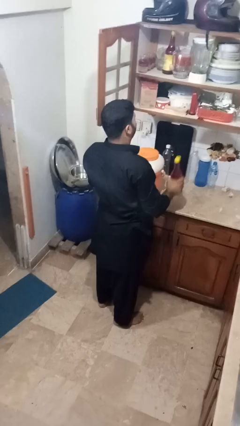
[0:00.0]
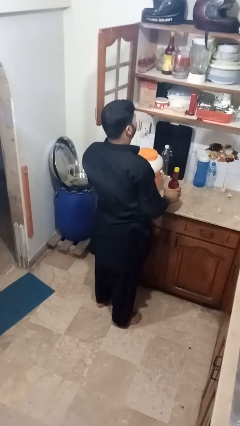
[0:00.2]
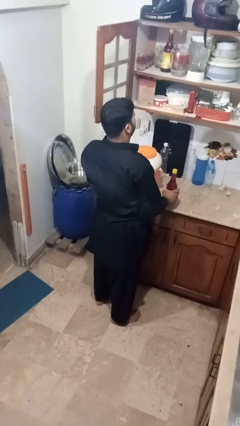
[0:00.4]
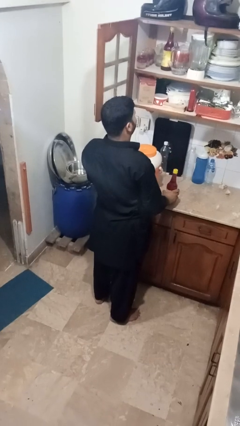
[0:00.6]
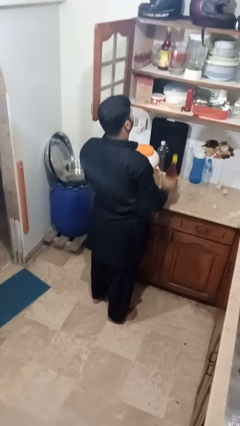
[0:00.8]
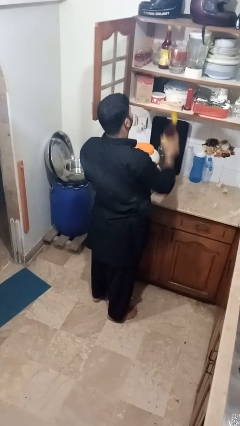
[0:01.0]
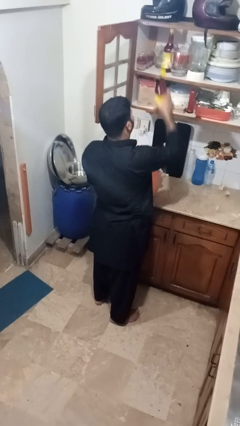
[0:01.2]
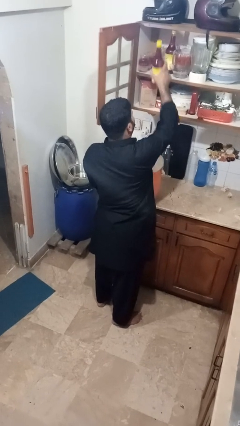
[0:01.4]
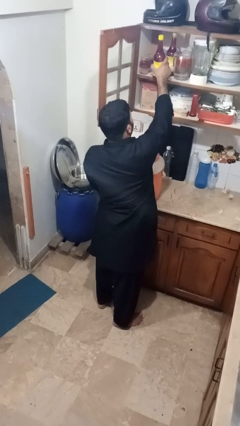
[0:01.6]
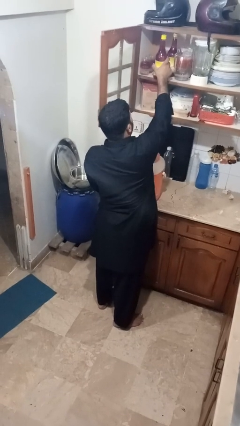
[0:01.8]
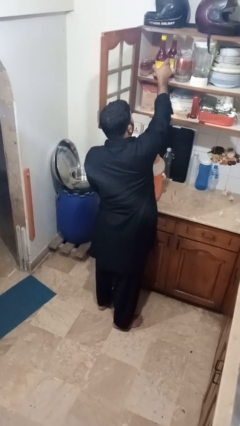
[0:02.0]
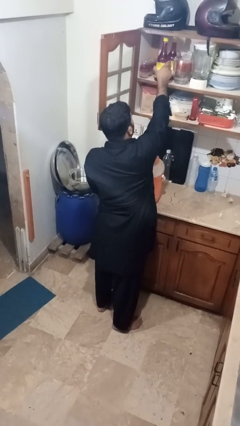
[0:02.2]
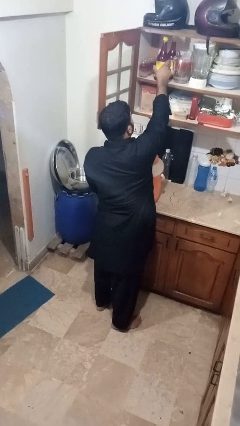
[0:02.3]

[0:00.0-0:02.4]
person puts down object into cabinet

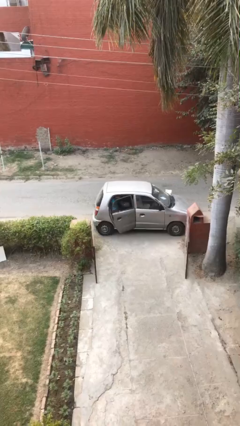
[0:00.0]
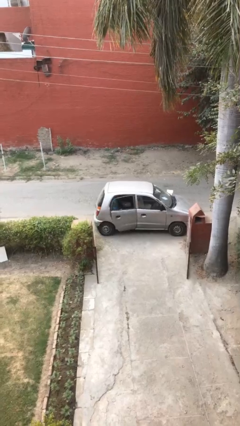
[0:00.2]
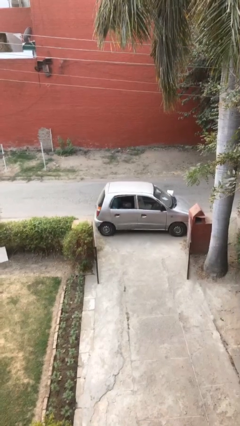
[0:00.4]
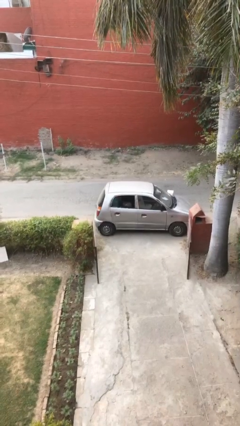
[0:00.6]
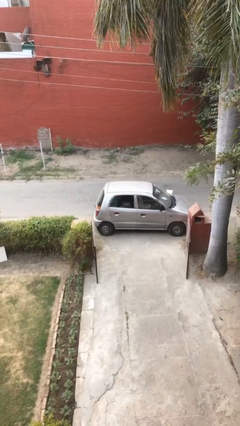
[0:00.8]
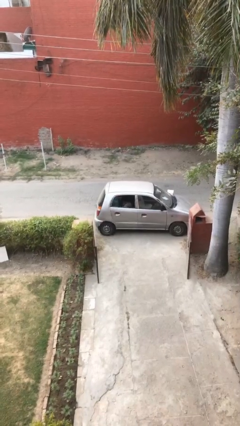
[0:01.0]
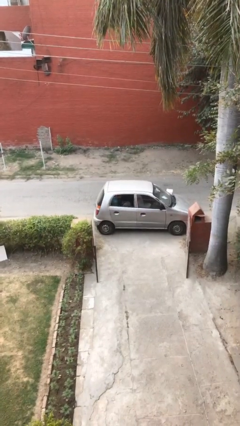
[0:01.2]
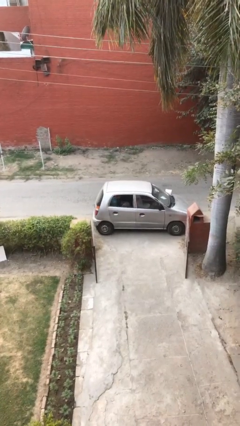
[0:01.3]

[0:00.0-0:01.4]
person closes car door

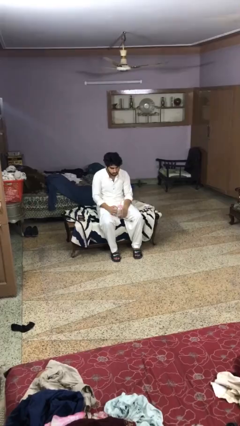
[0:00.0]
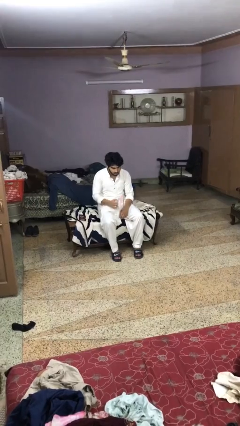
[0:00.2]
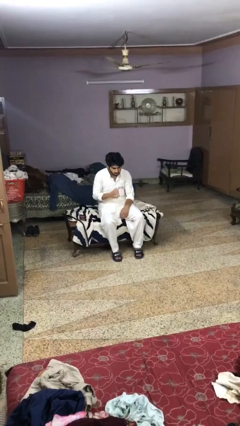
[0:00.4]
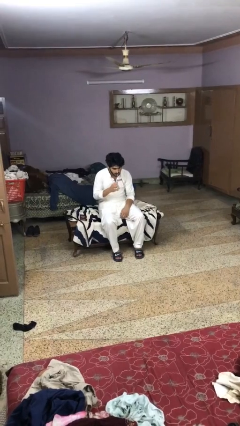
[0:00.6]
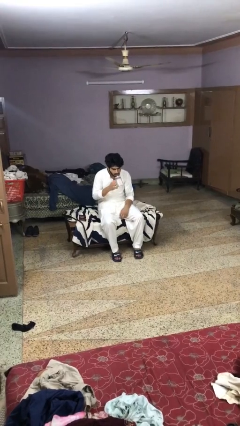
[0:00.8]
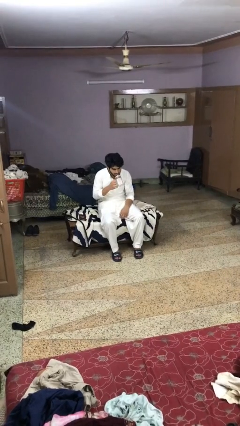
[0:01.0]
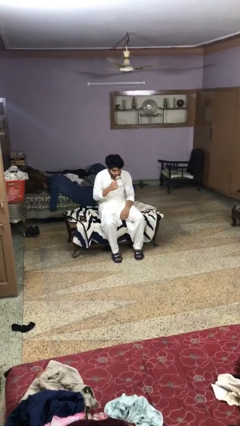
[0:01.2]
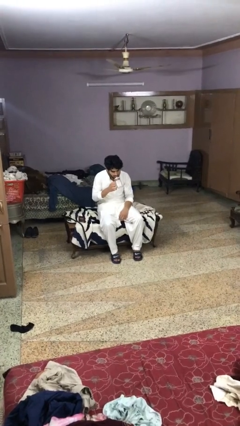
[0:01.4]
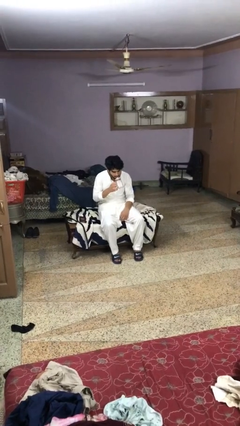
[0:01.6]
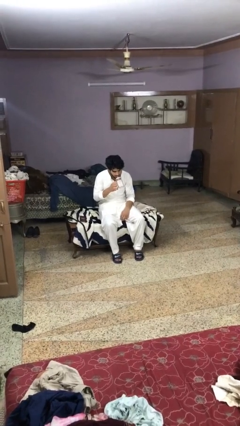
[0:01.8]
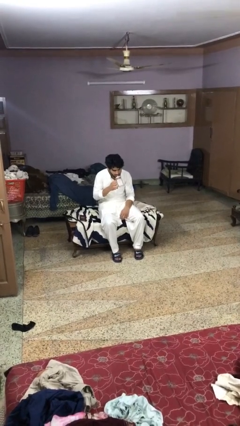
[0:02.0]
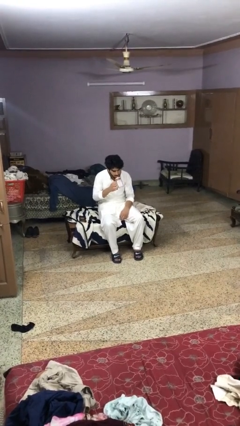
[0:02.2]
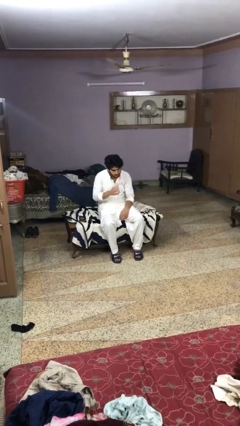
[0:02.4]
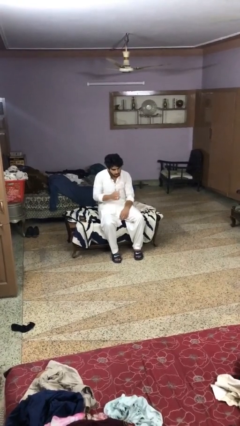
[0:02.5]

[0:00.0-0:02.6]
person drinks from straw

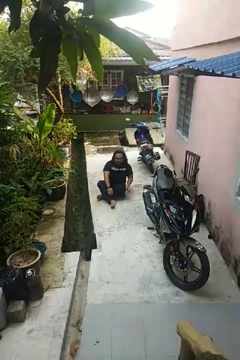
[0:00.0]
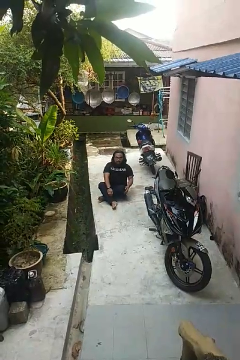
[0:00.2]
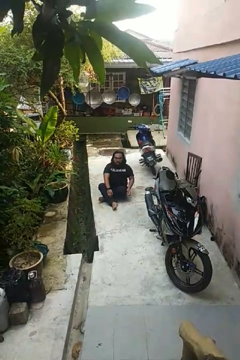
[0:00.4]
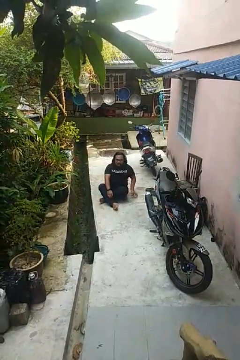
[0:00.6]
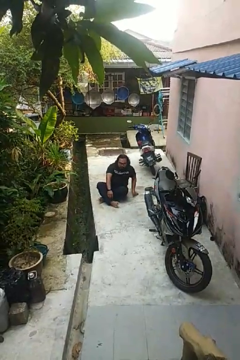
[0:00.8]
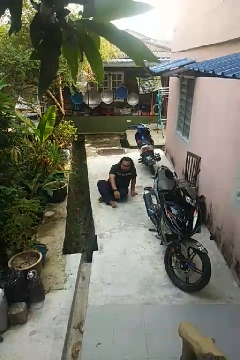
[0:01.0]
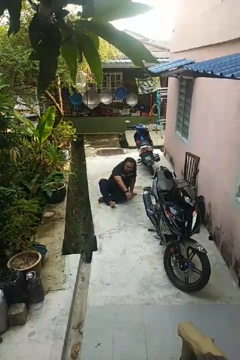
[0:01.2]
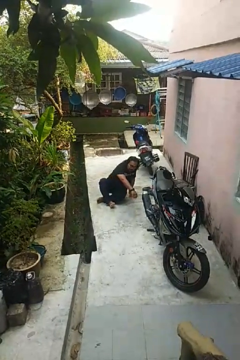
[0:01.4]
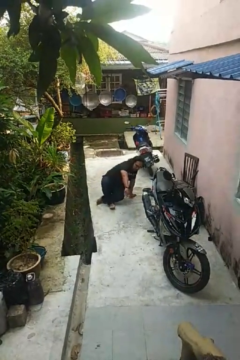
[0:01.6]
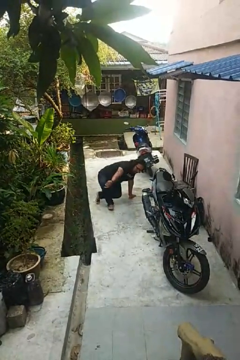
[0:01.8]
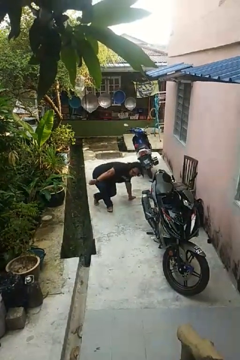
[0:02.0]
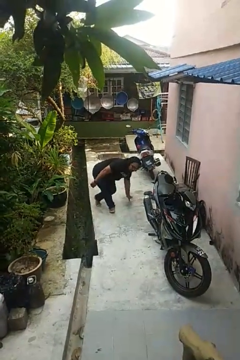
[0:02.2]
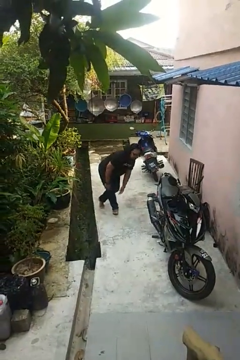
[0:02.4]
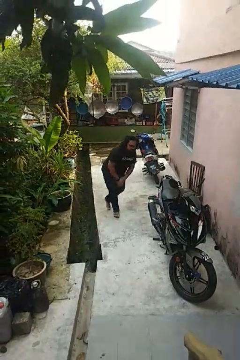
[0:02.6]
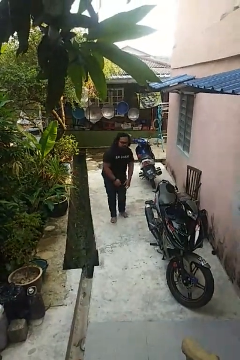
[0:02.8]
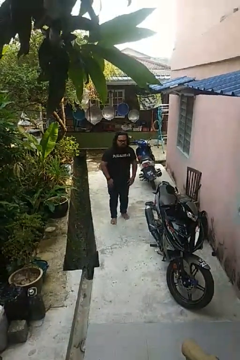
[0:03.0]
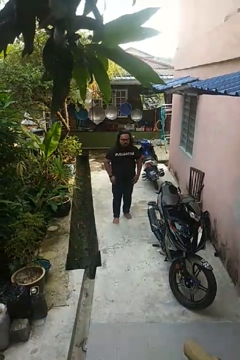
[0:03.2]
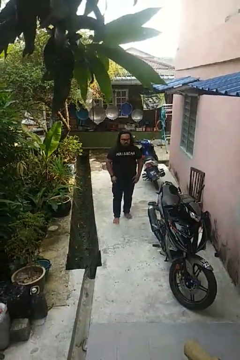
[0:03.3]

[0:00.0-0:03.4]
person stands up from floor

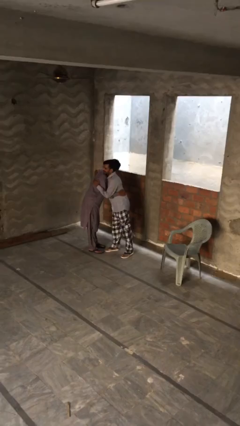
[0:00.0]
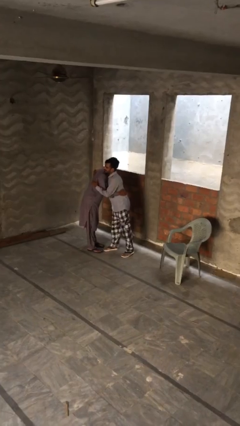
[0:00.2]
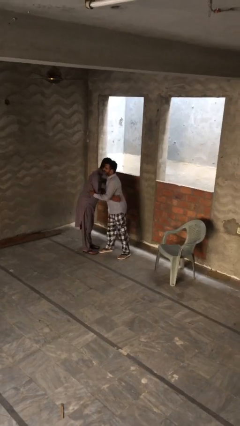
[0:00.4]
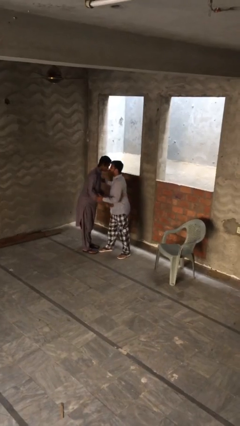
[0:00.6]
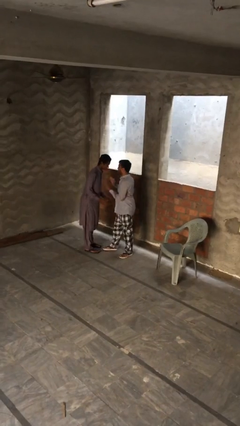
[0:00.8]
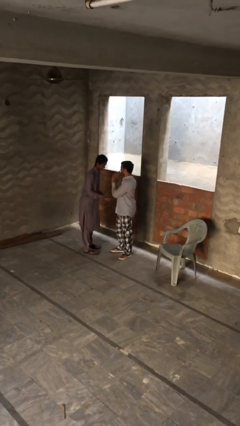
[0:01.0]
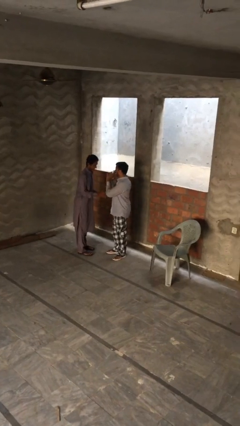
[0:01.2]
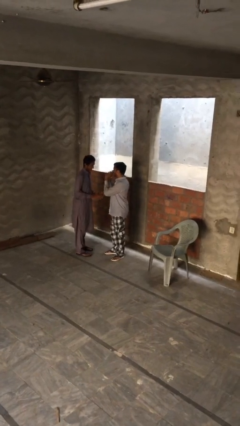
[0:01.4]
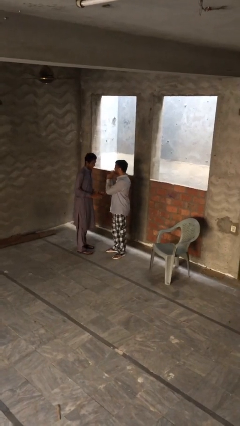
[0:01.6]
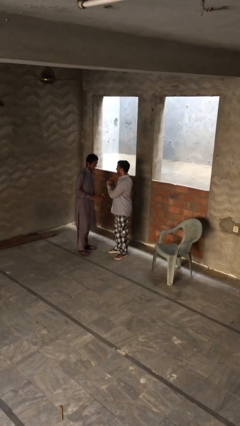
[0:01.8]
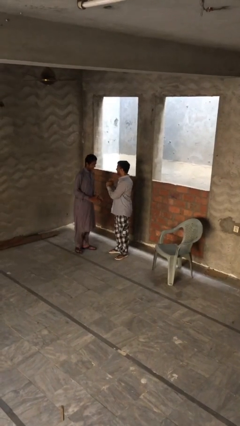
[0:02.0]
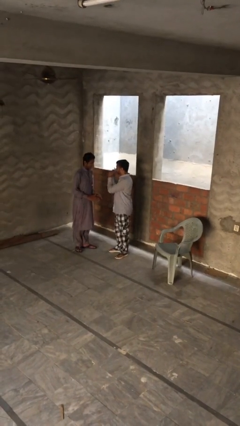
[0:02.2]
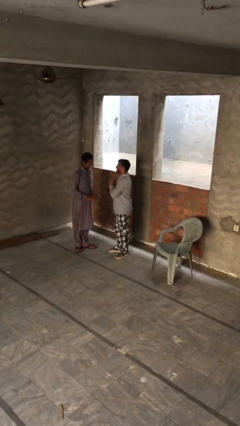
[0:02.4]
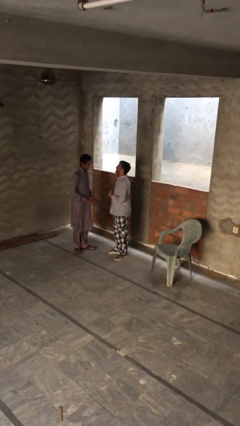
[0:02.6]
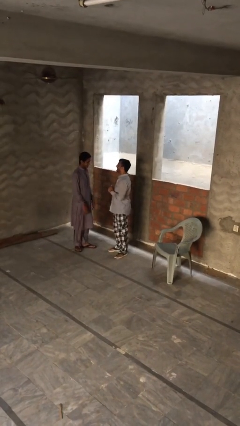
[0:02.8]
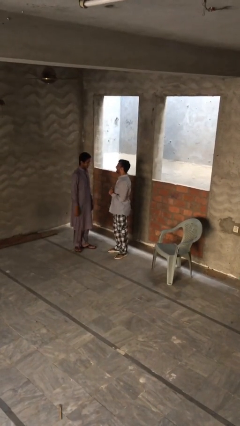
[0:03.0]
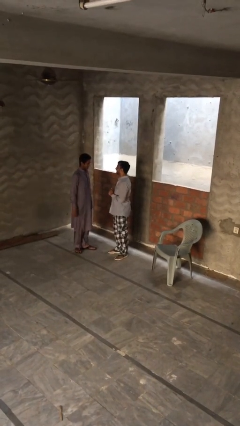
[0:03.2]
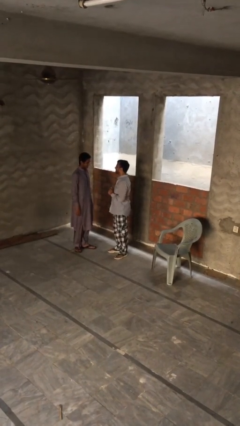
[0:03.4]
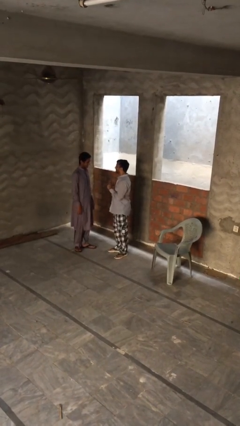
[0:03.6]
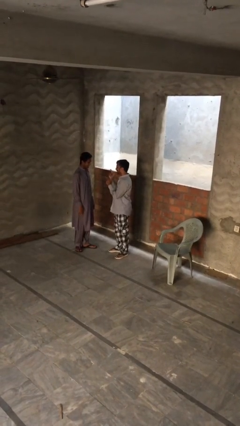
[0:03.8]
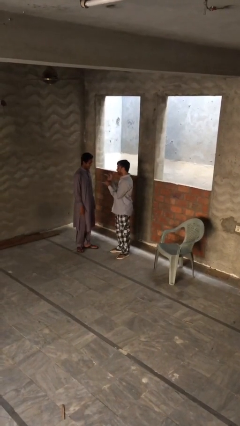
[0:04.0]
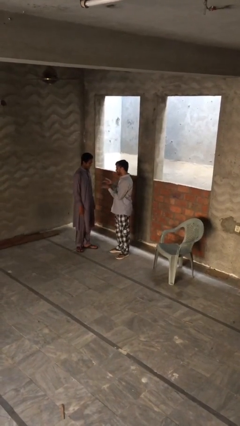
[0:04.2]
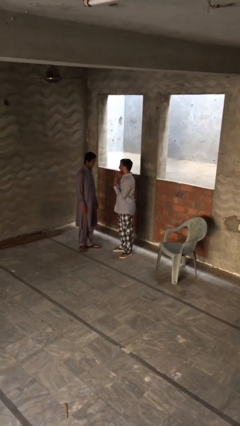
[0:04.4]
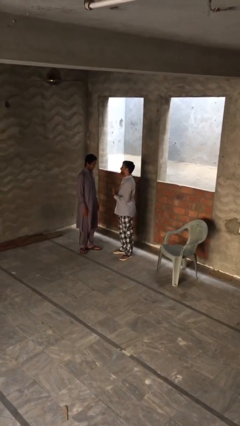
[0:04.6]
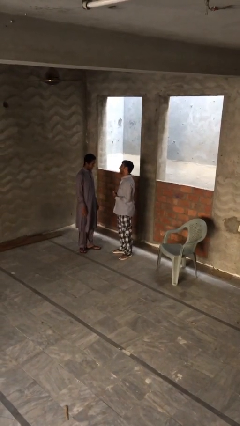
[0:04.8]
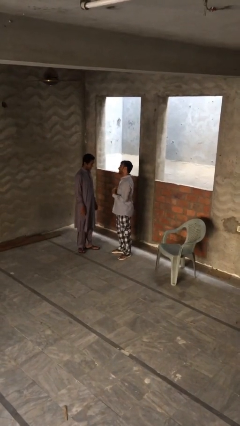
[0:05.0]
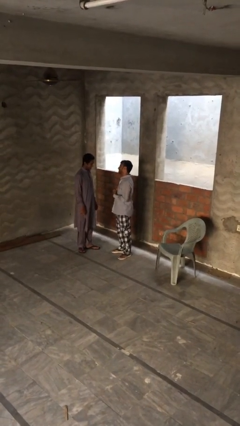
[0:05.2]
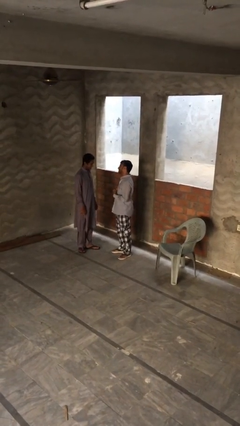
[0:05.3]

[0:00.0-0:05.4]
person talks to person

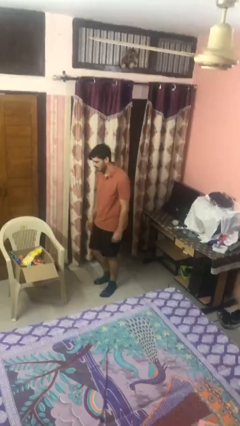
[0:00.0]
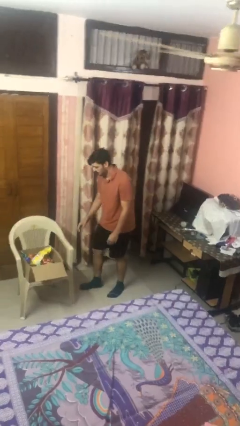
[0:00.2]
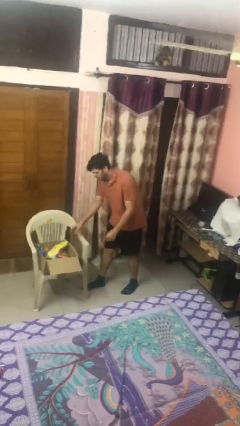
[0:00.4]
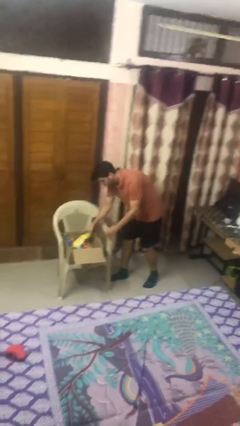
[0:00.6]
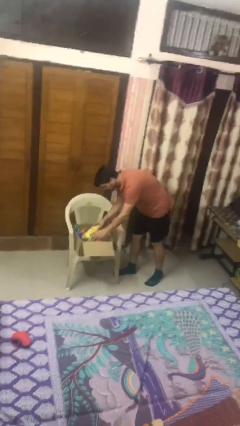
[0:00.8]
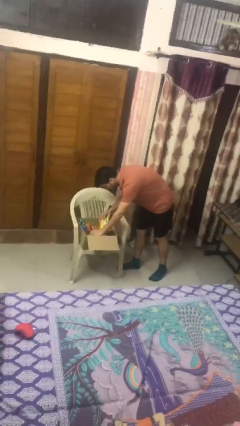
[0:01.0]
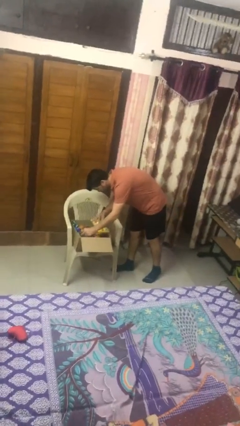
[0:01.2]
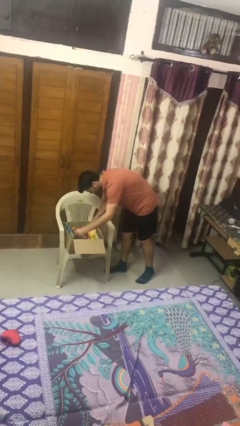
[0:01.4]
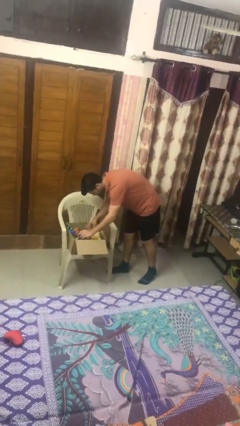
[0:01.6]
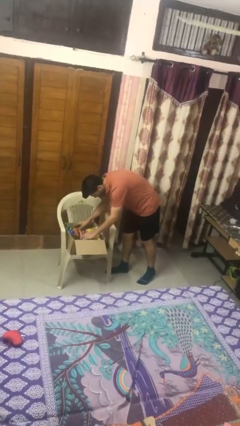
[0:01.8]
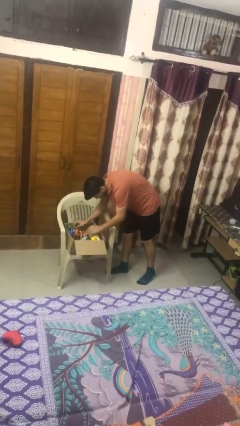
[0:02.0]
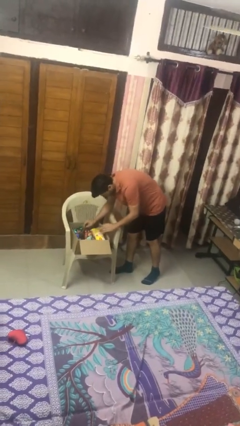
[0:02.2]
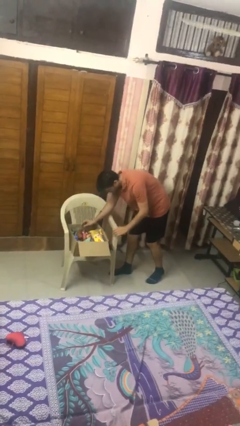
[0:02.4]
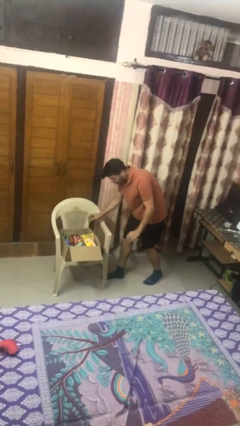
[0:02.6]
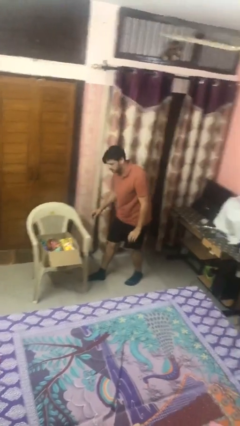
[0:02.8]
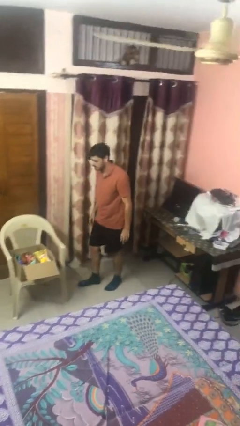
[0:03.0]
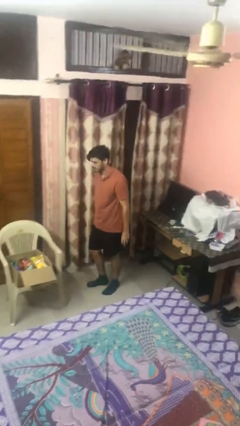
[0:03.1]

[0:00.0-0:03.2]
person searches in box
